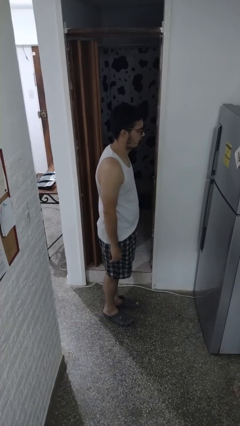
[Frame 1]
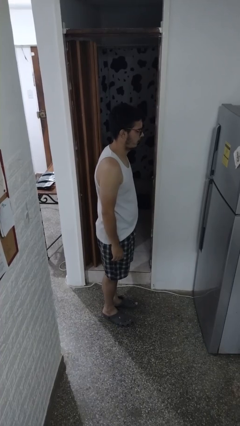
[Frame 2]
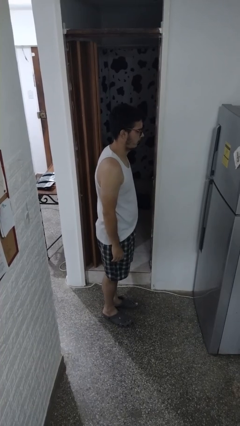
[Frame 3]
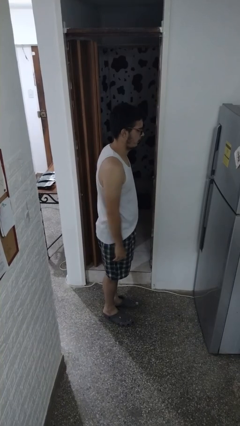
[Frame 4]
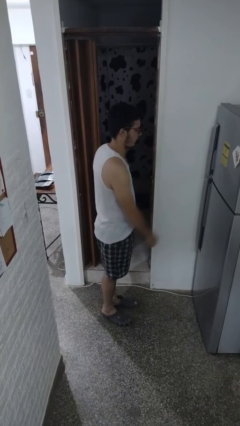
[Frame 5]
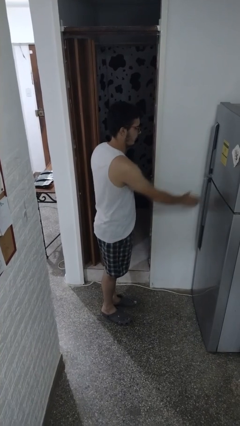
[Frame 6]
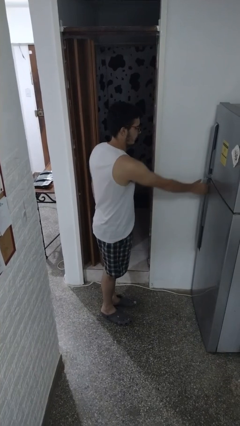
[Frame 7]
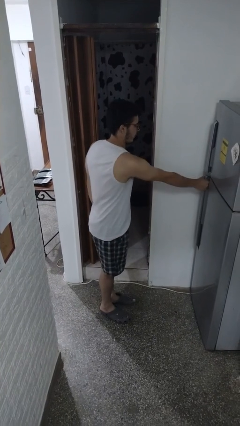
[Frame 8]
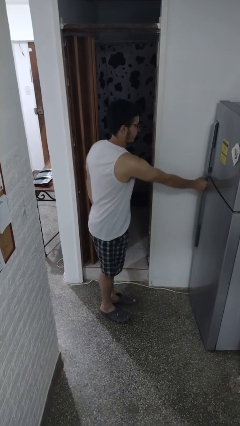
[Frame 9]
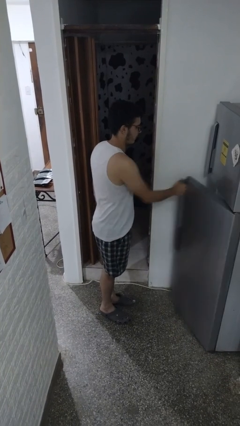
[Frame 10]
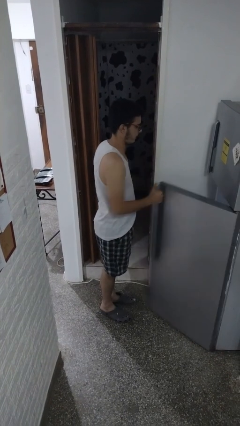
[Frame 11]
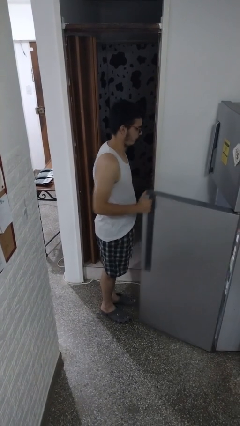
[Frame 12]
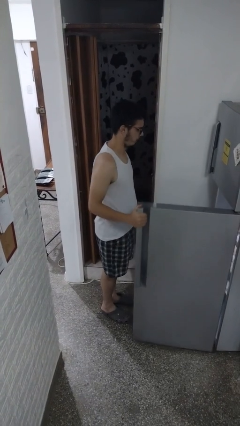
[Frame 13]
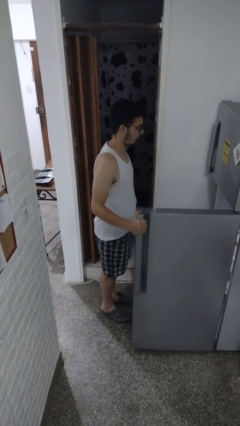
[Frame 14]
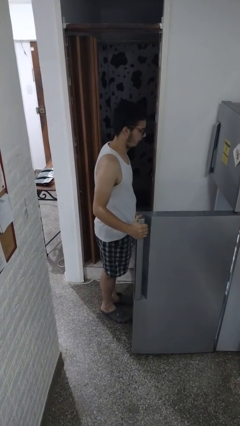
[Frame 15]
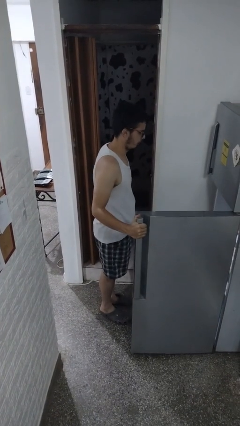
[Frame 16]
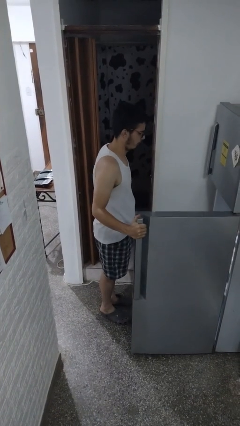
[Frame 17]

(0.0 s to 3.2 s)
person opens refrigerator

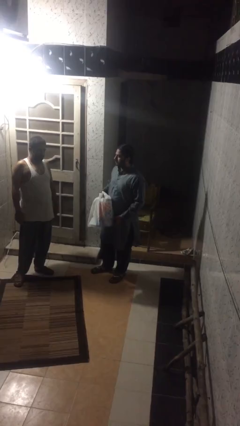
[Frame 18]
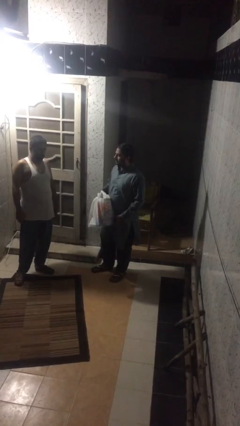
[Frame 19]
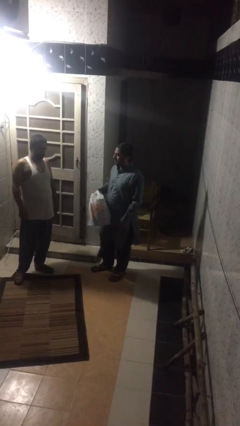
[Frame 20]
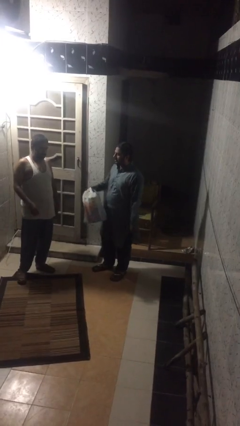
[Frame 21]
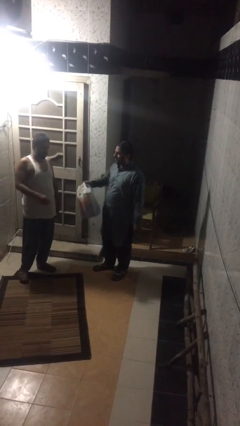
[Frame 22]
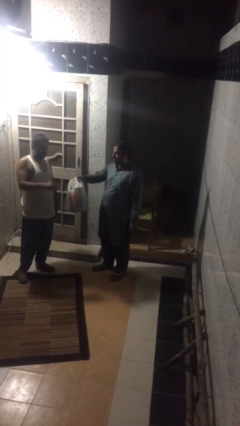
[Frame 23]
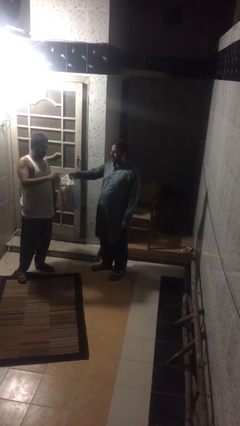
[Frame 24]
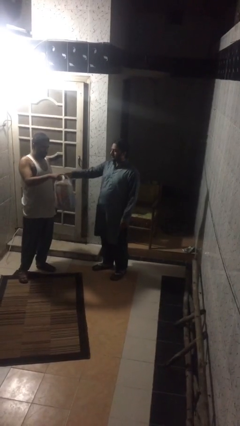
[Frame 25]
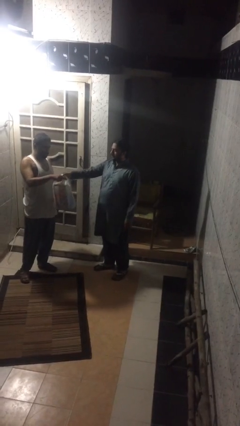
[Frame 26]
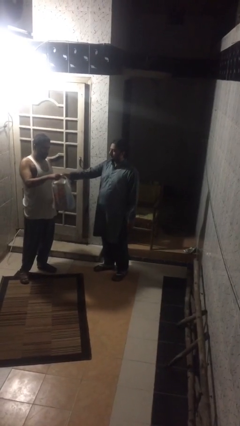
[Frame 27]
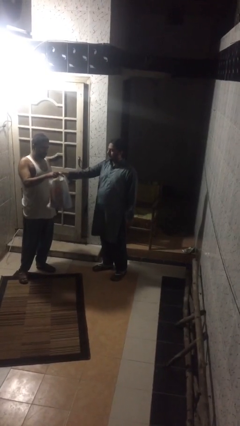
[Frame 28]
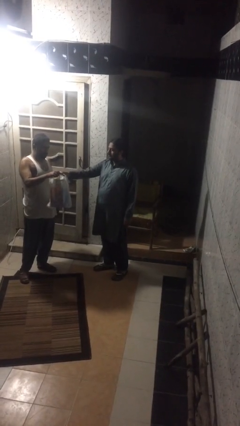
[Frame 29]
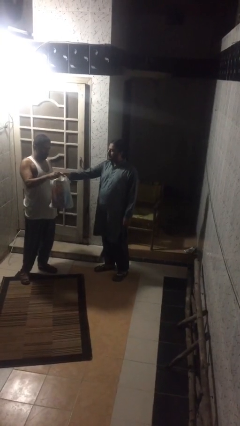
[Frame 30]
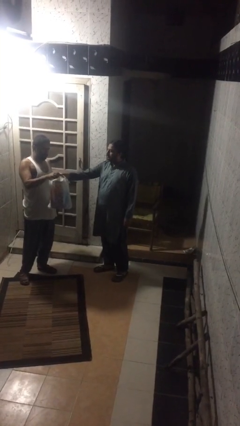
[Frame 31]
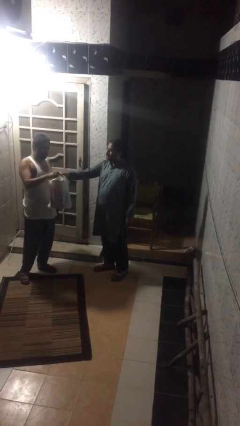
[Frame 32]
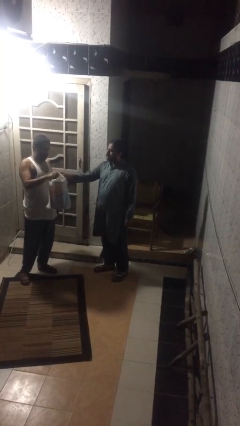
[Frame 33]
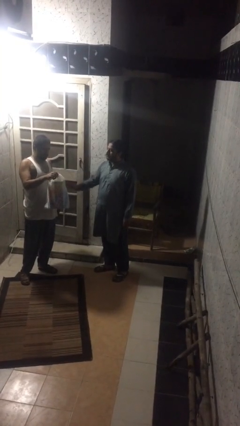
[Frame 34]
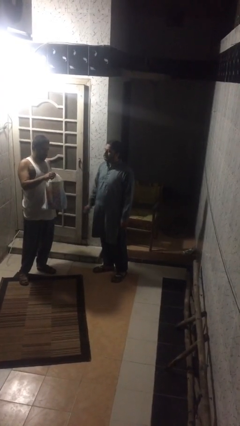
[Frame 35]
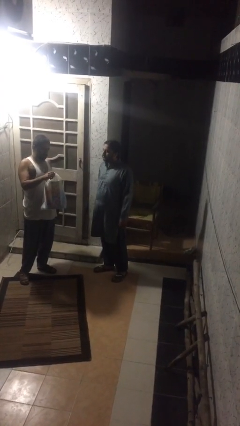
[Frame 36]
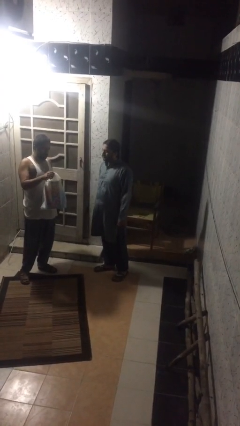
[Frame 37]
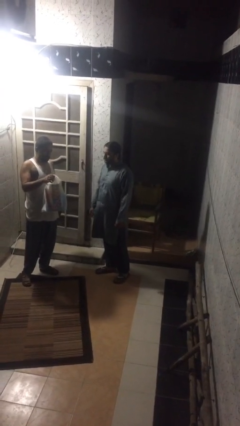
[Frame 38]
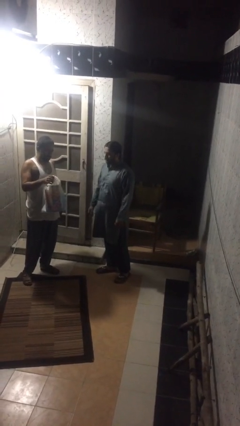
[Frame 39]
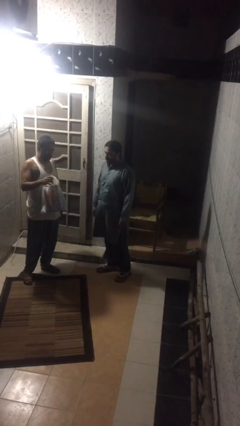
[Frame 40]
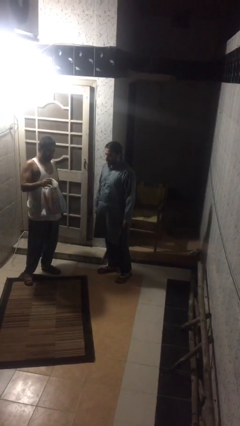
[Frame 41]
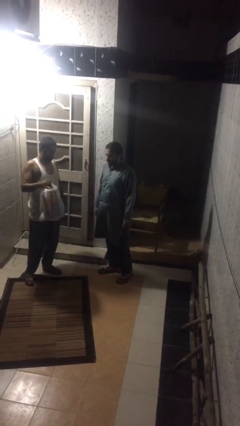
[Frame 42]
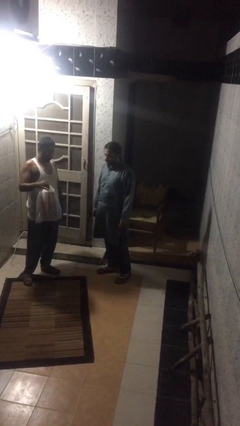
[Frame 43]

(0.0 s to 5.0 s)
person transfers object to person

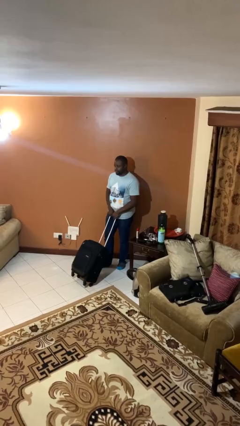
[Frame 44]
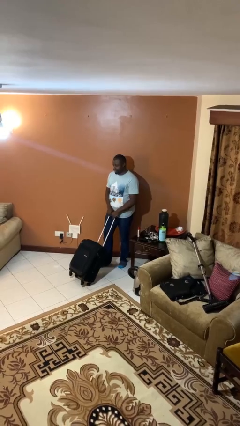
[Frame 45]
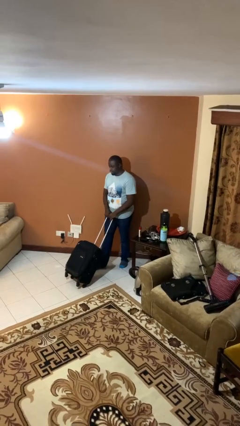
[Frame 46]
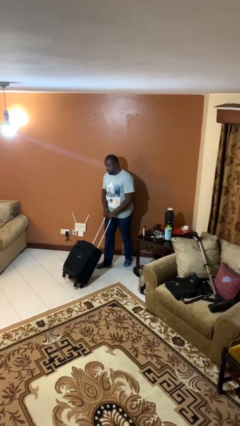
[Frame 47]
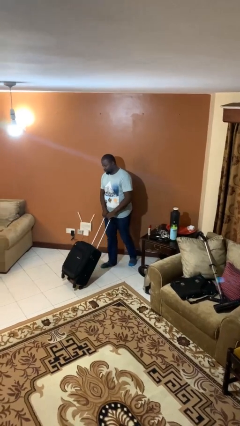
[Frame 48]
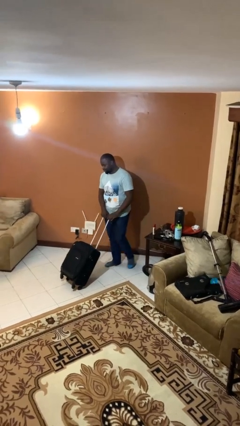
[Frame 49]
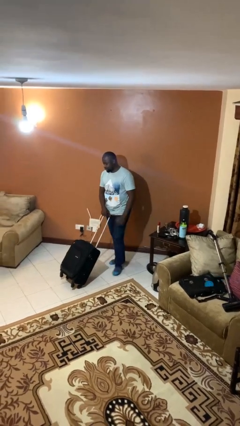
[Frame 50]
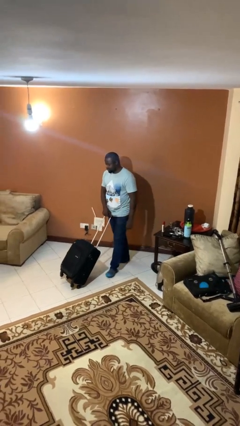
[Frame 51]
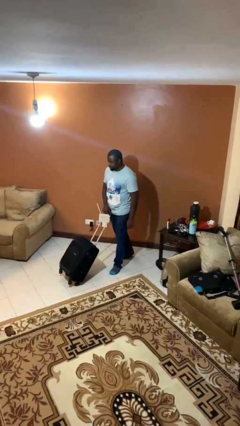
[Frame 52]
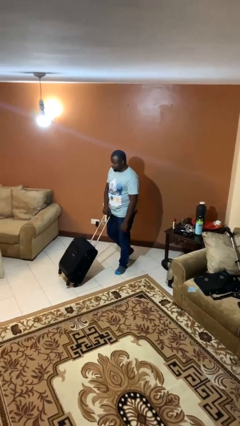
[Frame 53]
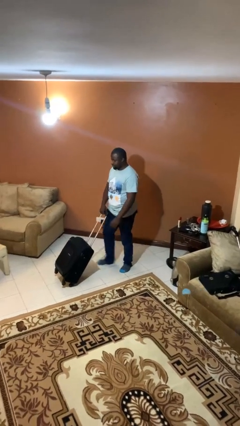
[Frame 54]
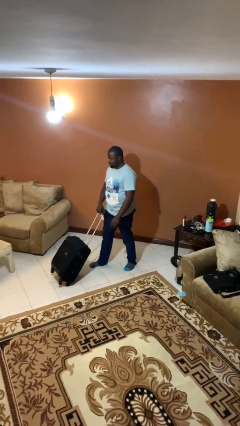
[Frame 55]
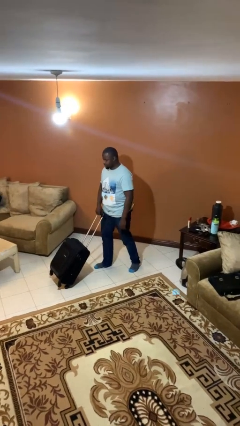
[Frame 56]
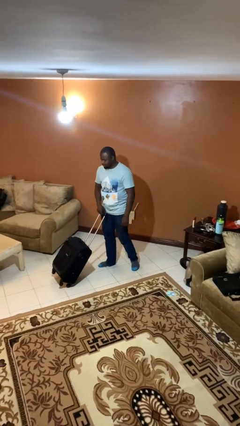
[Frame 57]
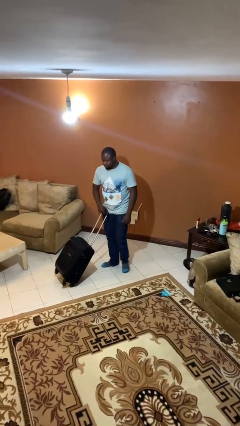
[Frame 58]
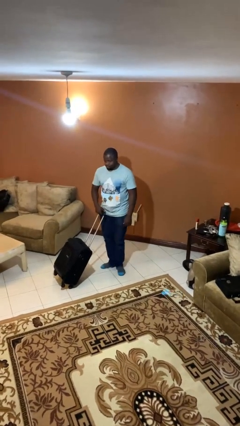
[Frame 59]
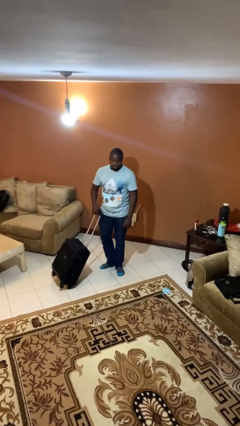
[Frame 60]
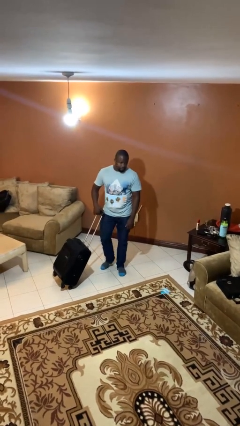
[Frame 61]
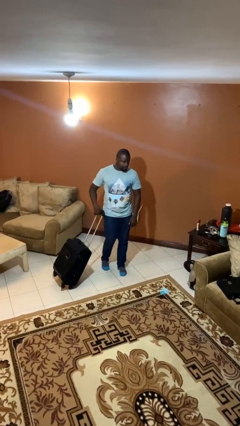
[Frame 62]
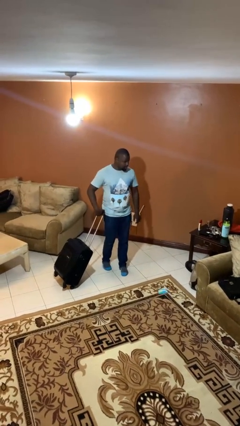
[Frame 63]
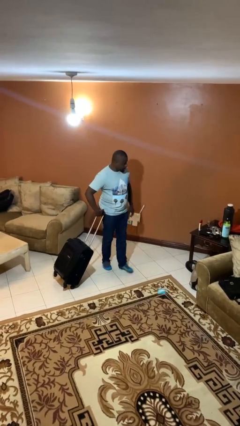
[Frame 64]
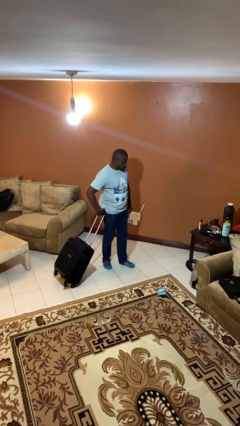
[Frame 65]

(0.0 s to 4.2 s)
person pushes wheeled cart

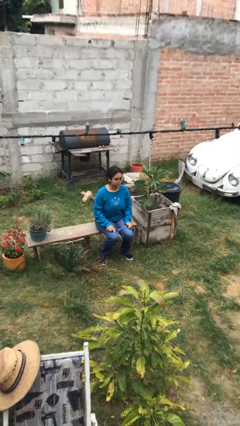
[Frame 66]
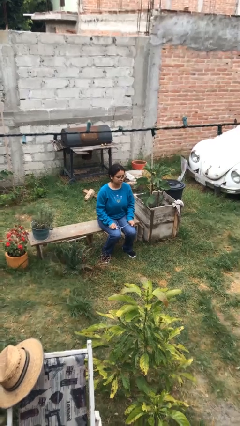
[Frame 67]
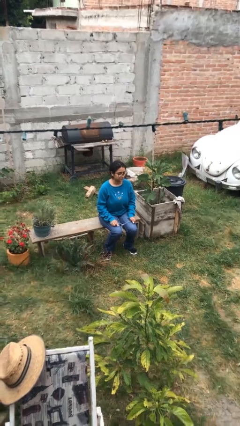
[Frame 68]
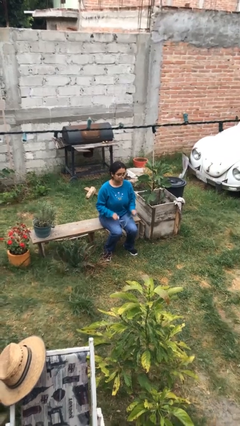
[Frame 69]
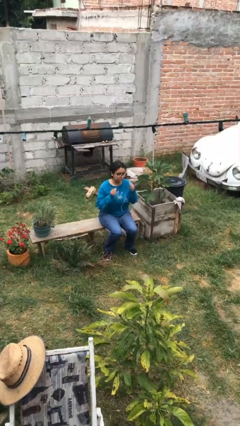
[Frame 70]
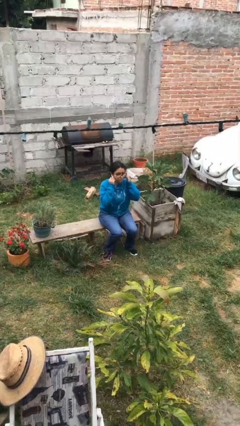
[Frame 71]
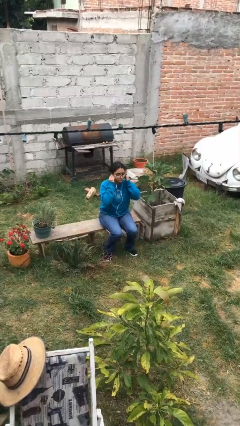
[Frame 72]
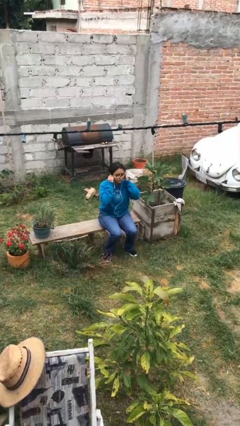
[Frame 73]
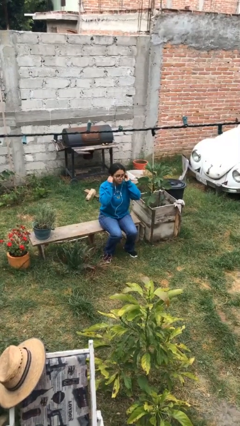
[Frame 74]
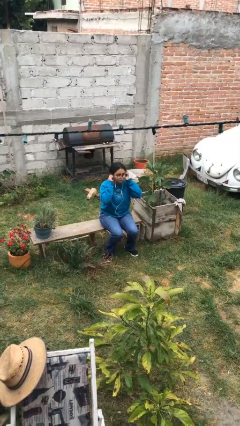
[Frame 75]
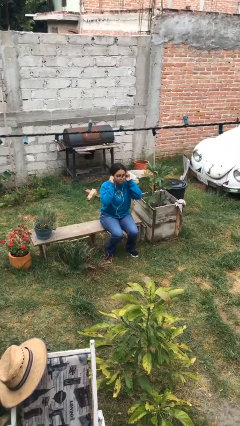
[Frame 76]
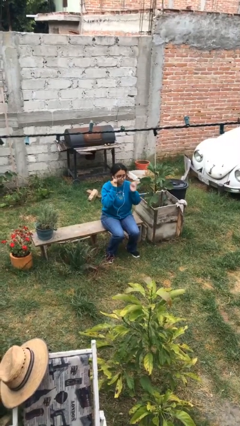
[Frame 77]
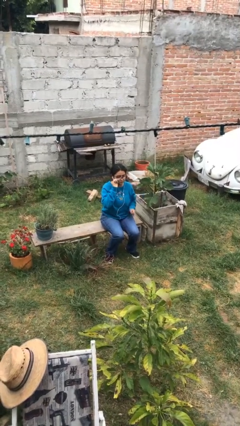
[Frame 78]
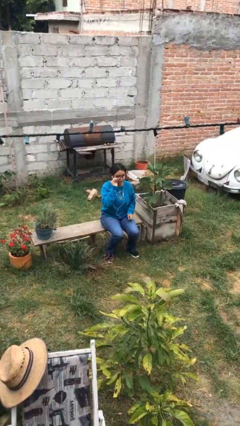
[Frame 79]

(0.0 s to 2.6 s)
person puts on headphones

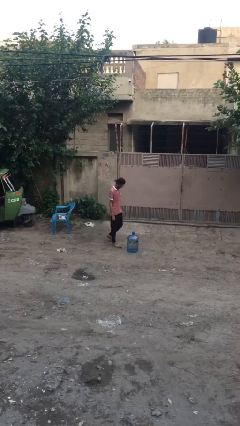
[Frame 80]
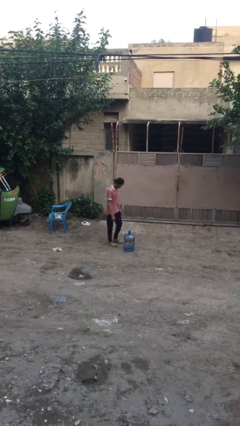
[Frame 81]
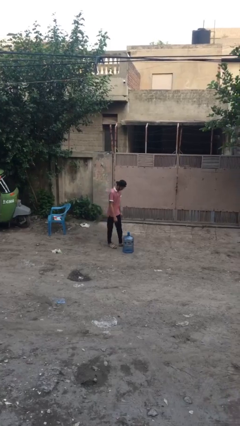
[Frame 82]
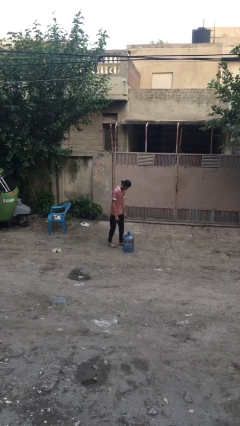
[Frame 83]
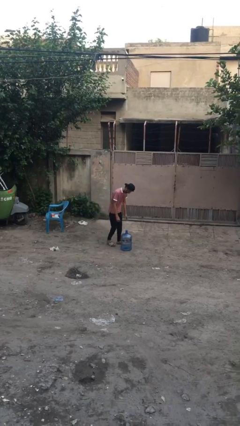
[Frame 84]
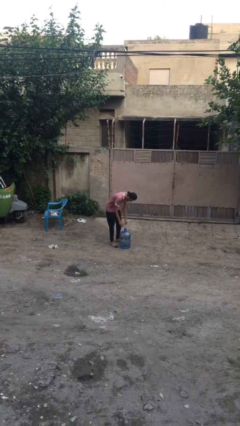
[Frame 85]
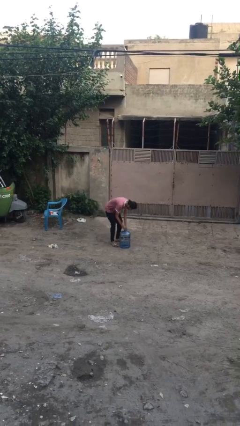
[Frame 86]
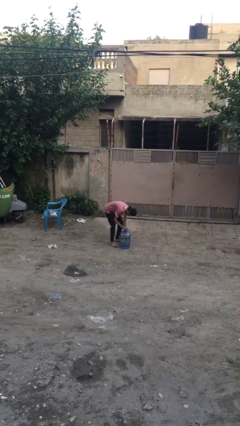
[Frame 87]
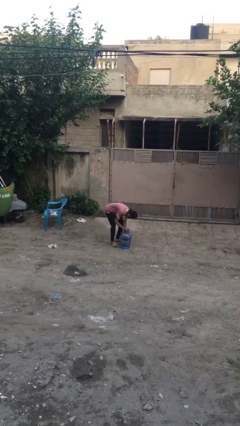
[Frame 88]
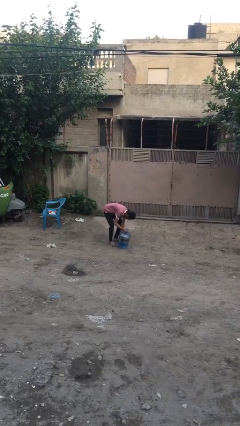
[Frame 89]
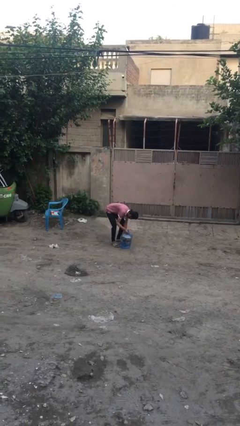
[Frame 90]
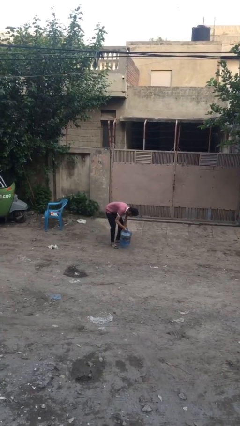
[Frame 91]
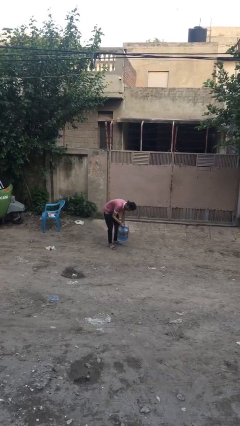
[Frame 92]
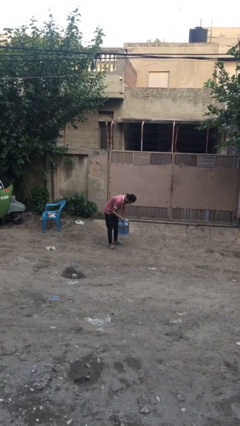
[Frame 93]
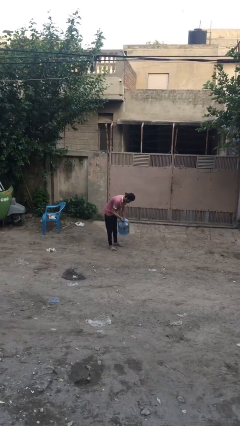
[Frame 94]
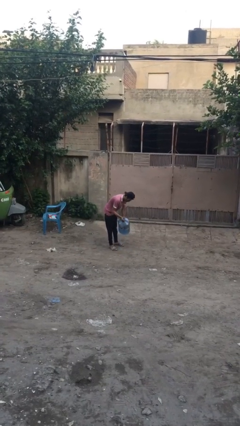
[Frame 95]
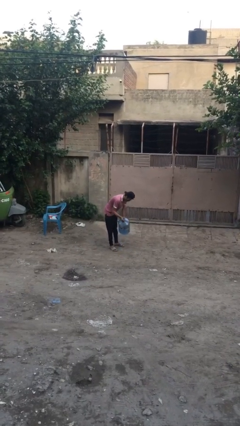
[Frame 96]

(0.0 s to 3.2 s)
person picks up object from floor
